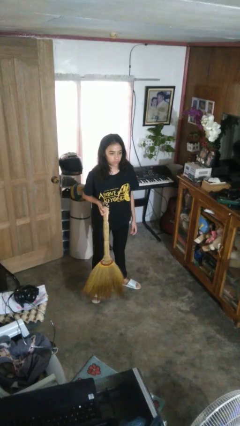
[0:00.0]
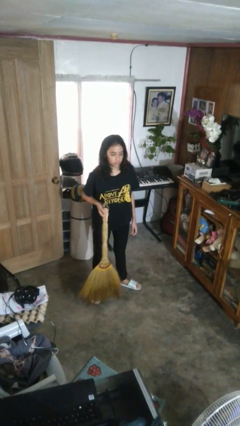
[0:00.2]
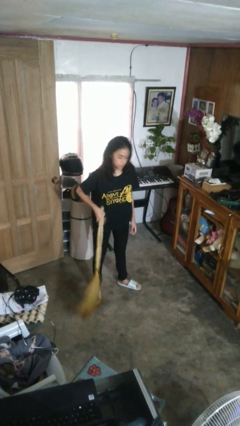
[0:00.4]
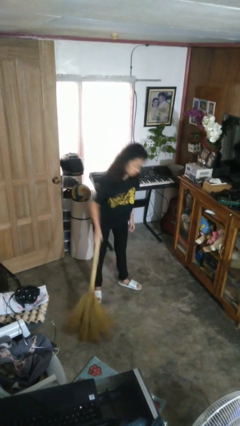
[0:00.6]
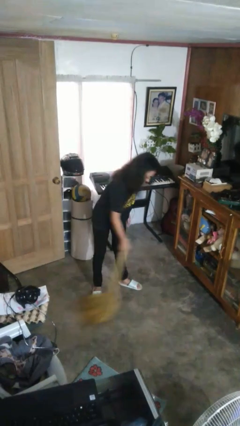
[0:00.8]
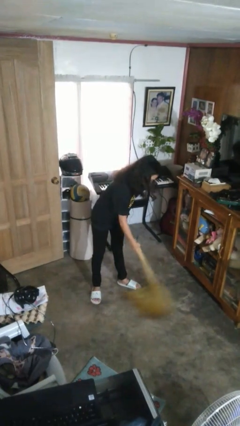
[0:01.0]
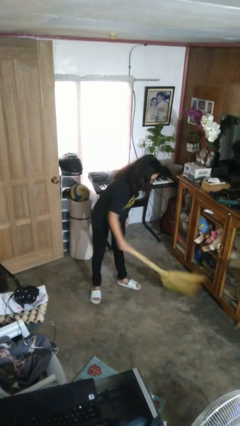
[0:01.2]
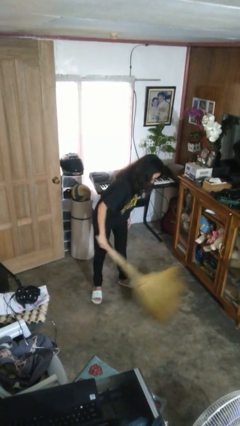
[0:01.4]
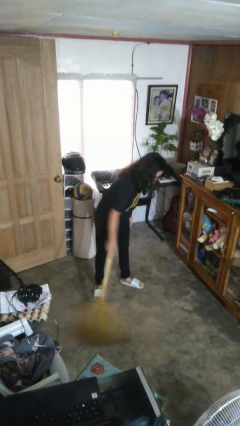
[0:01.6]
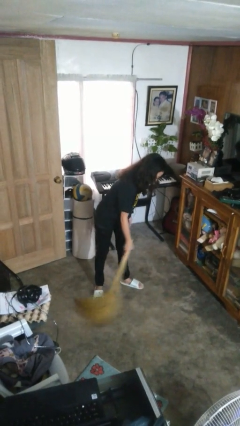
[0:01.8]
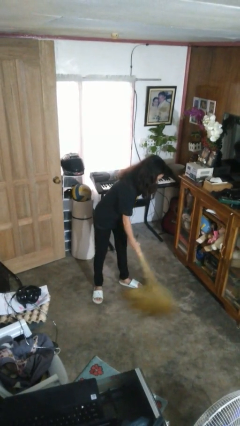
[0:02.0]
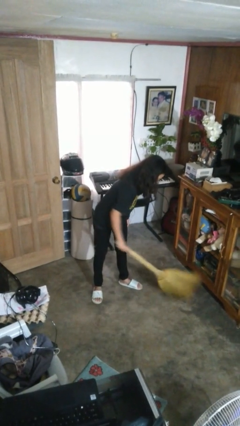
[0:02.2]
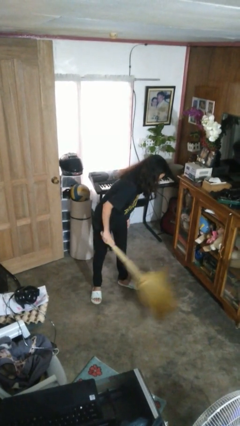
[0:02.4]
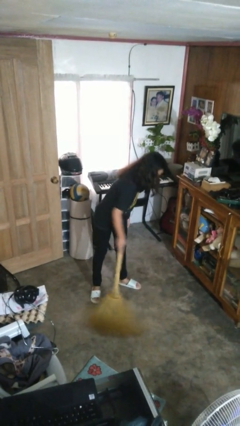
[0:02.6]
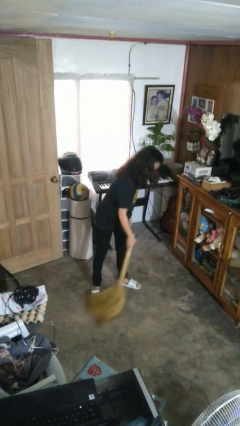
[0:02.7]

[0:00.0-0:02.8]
person sweeps floor

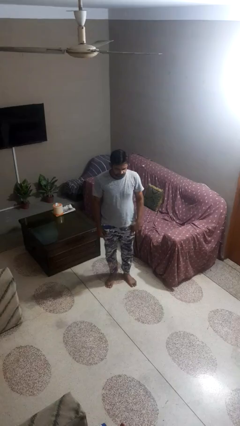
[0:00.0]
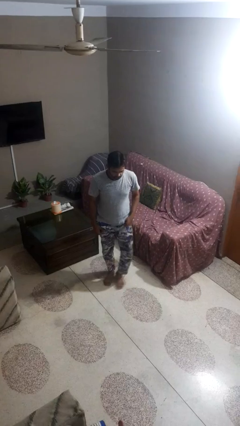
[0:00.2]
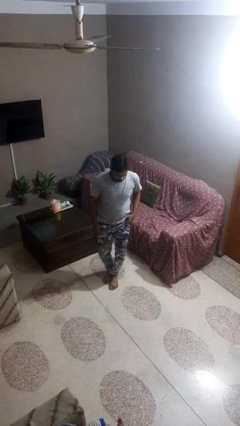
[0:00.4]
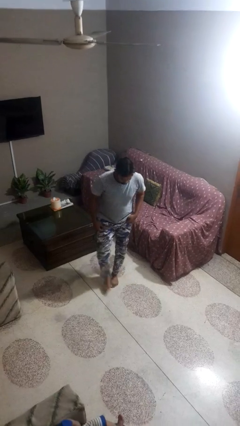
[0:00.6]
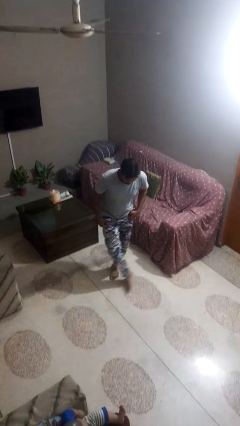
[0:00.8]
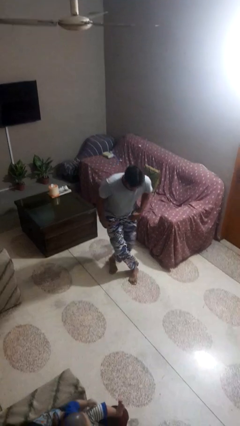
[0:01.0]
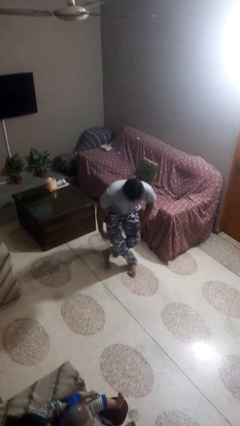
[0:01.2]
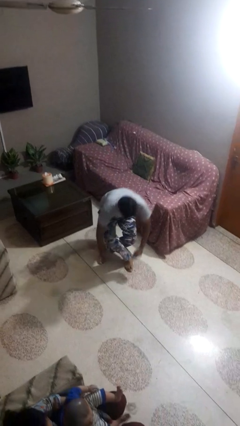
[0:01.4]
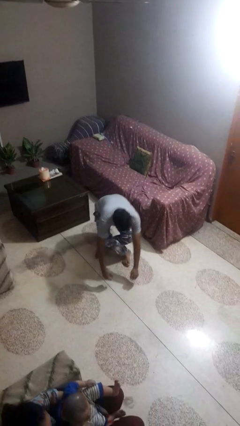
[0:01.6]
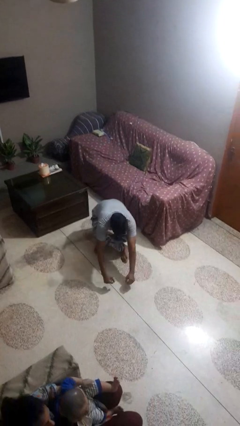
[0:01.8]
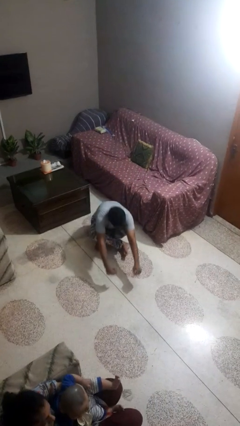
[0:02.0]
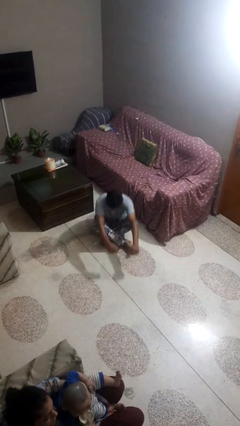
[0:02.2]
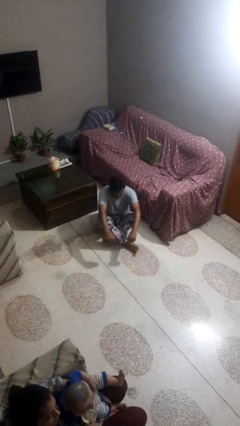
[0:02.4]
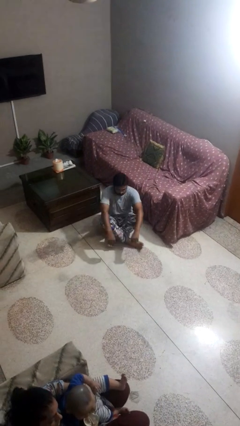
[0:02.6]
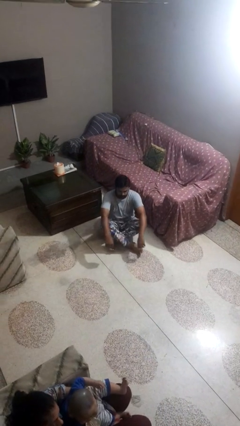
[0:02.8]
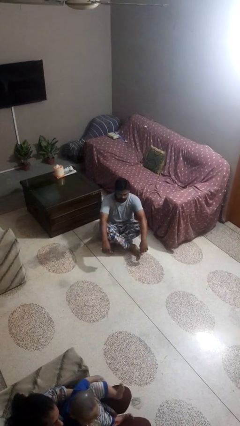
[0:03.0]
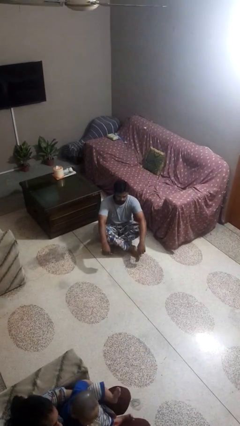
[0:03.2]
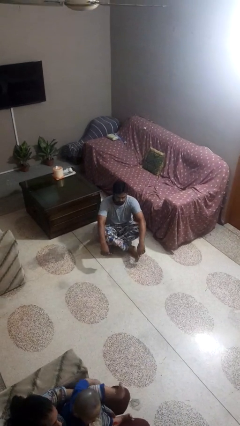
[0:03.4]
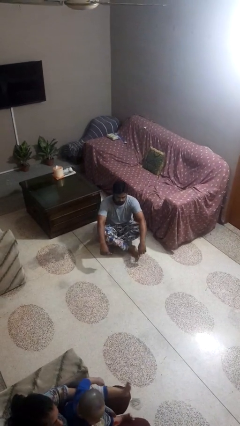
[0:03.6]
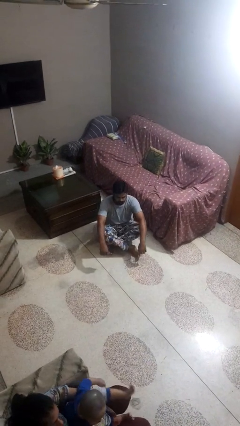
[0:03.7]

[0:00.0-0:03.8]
person sits crisscross

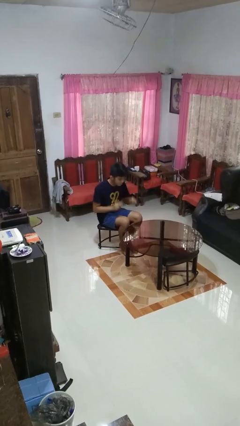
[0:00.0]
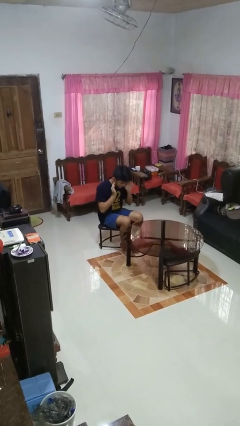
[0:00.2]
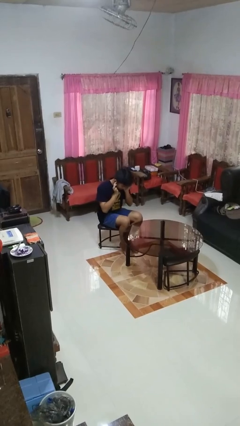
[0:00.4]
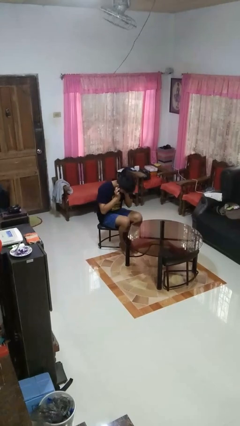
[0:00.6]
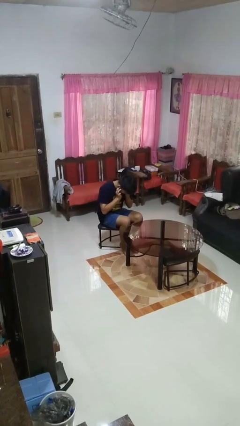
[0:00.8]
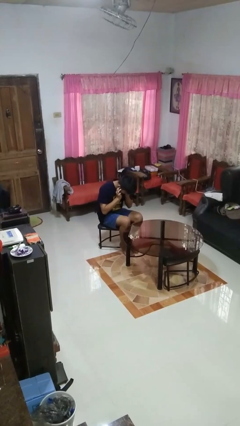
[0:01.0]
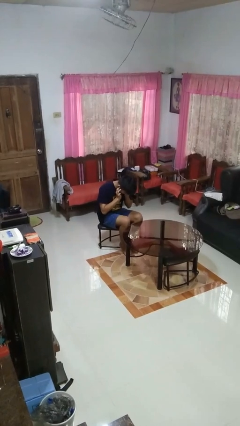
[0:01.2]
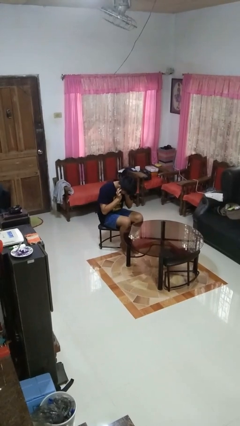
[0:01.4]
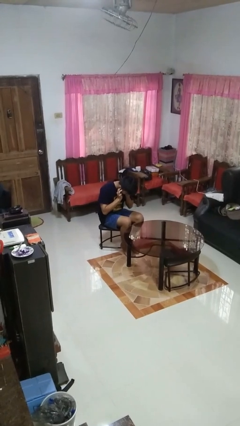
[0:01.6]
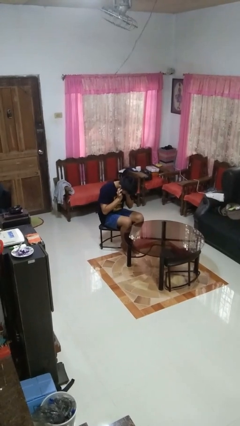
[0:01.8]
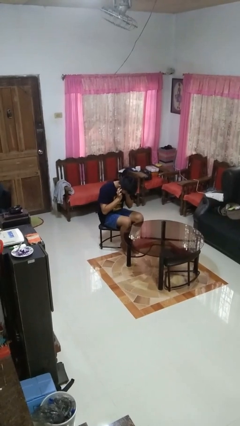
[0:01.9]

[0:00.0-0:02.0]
person puts fingers in ear

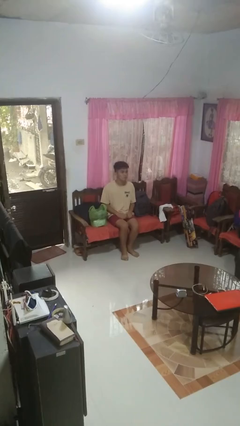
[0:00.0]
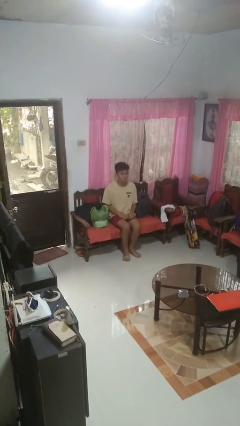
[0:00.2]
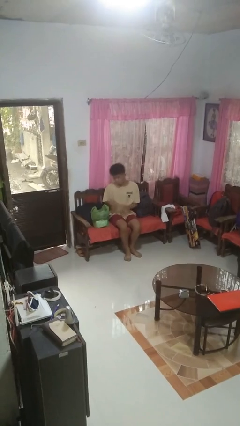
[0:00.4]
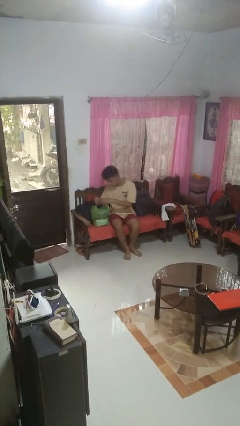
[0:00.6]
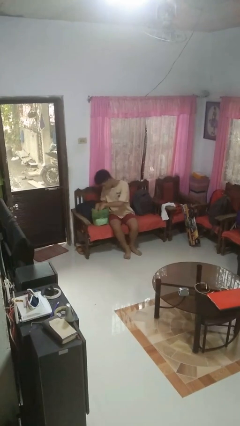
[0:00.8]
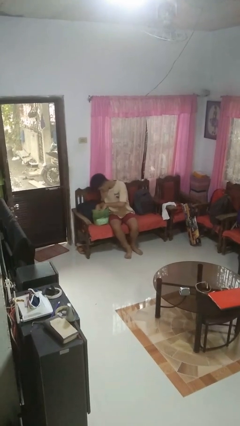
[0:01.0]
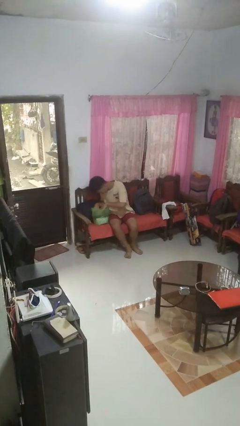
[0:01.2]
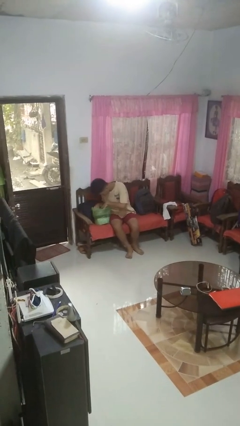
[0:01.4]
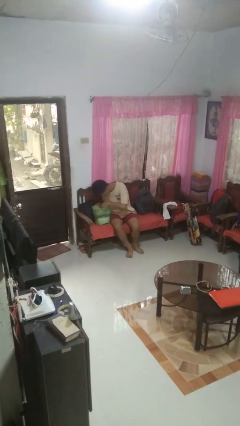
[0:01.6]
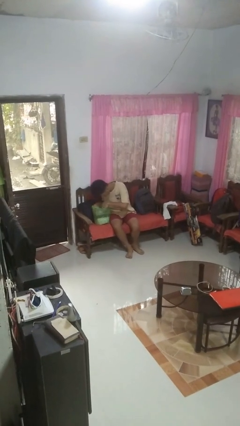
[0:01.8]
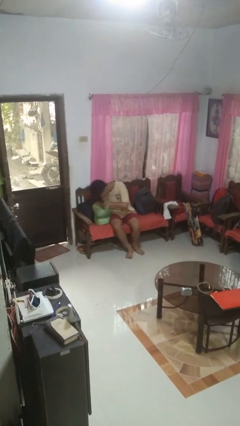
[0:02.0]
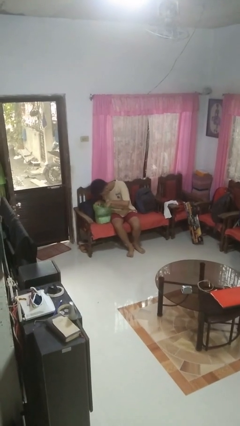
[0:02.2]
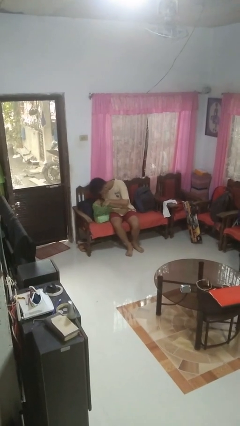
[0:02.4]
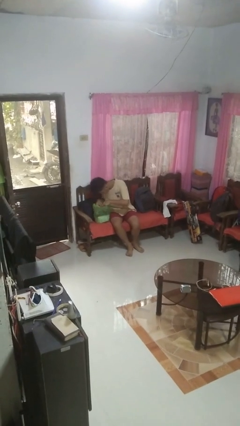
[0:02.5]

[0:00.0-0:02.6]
person searches in bag

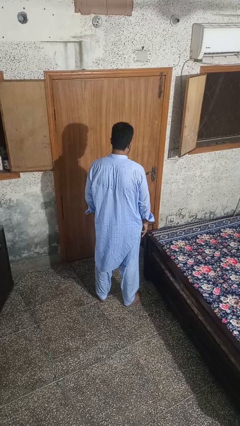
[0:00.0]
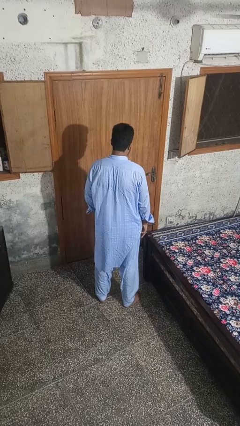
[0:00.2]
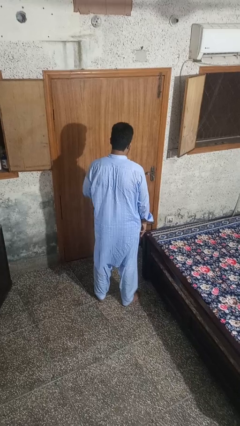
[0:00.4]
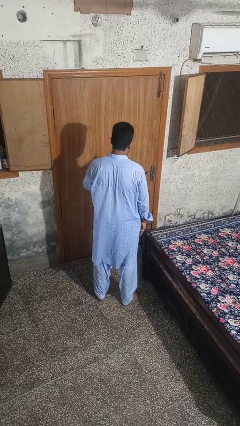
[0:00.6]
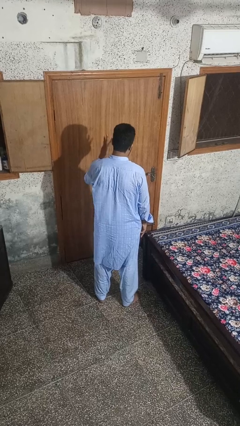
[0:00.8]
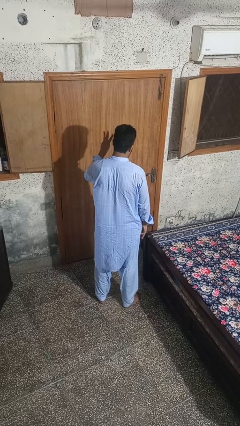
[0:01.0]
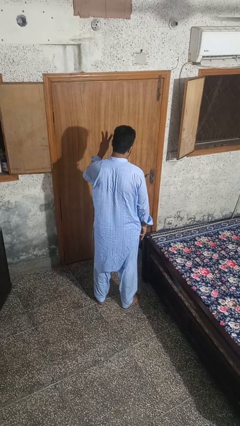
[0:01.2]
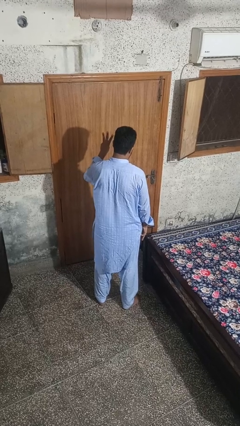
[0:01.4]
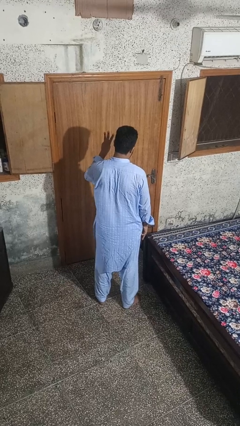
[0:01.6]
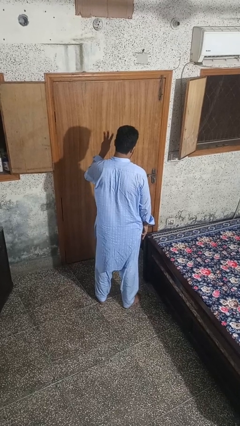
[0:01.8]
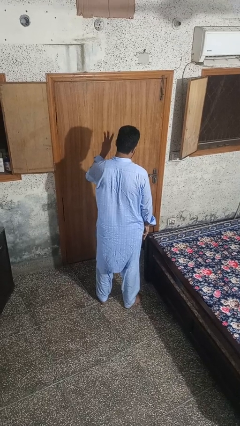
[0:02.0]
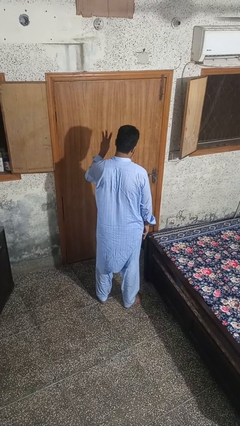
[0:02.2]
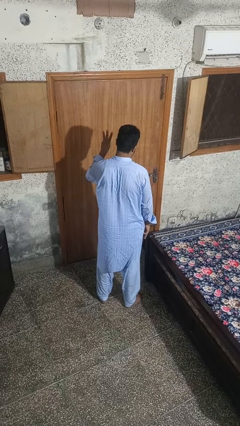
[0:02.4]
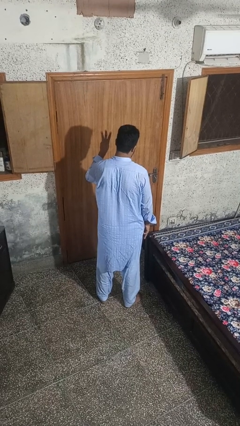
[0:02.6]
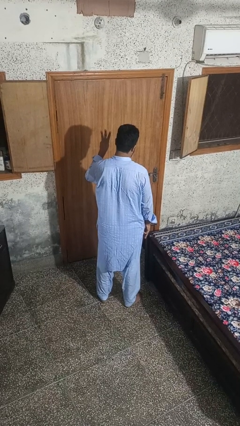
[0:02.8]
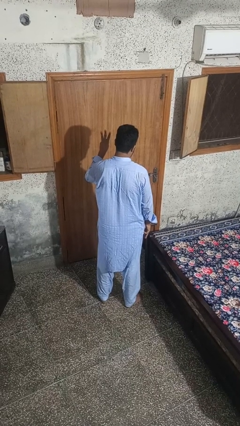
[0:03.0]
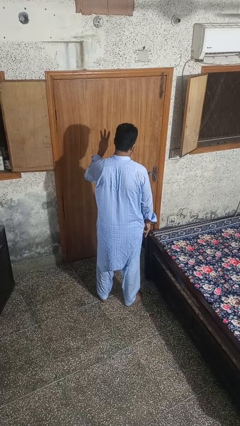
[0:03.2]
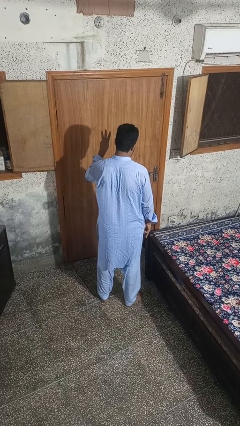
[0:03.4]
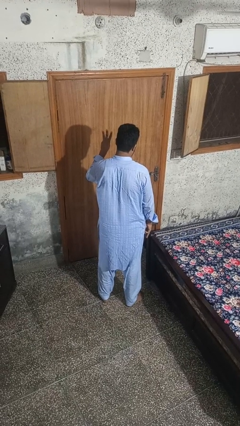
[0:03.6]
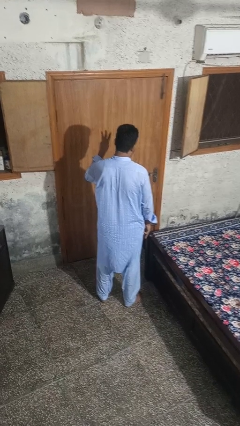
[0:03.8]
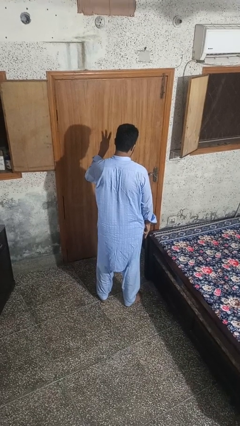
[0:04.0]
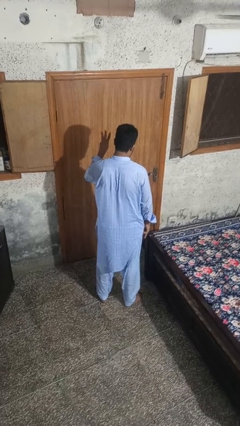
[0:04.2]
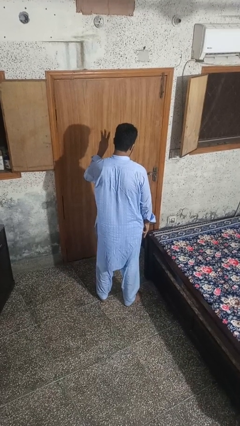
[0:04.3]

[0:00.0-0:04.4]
person gestures number three

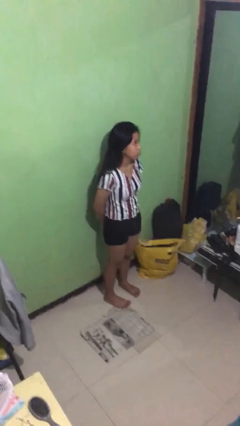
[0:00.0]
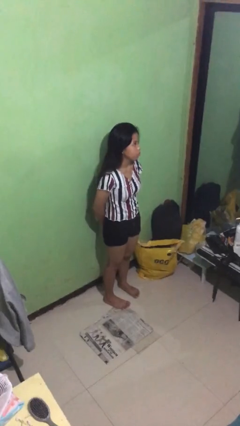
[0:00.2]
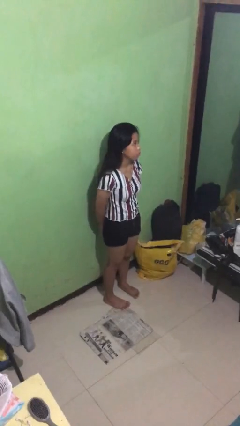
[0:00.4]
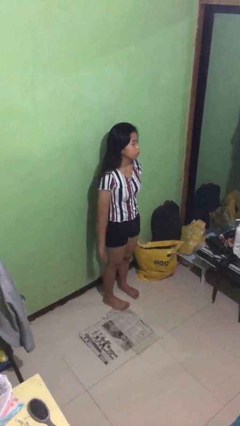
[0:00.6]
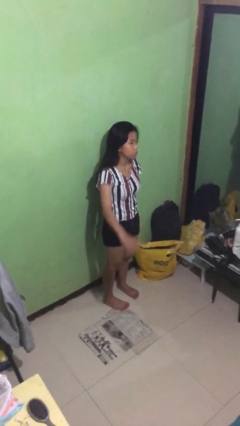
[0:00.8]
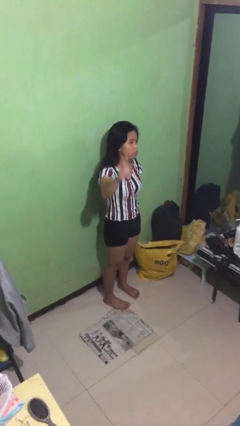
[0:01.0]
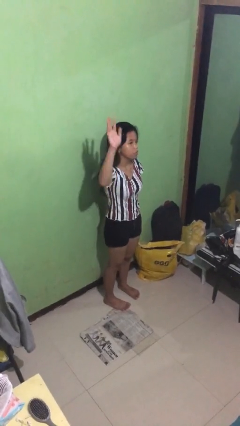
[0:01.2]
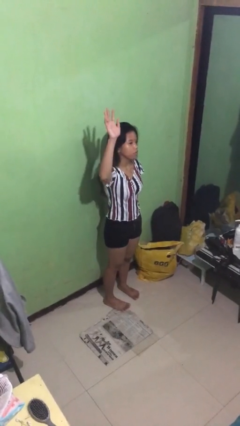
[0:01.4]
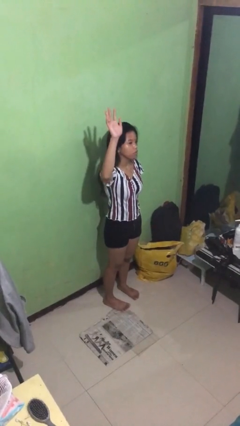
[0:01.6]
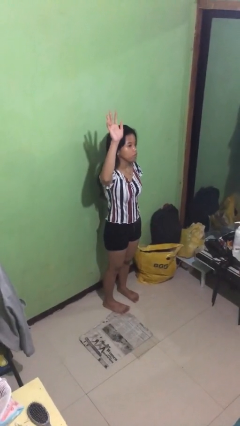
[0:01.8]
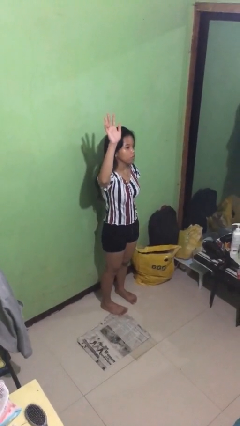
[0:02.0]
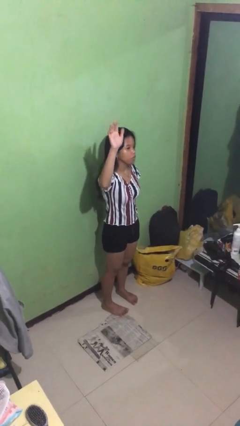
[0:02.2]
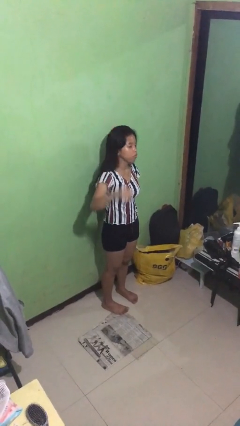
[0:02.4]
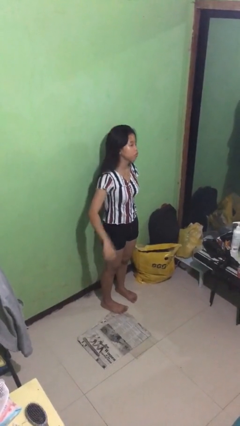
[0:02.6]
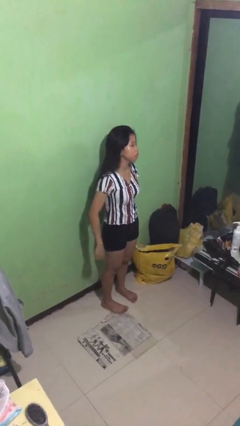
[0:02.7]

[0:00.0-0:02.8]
person gestures number five
